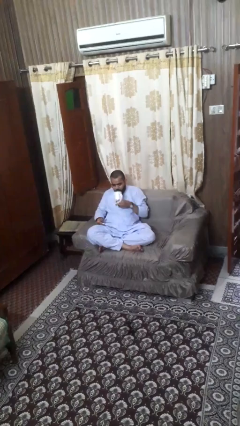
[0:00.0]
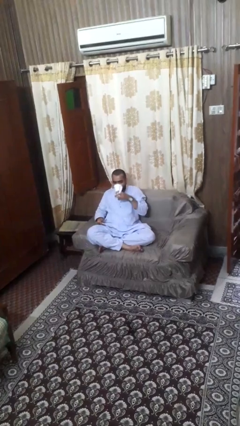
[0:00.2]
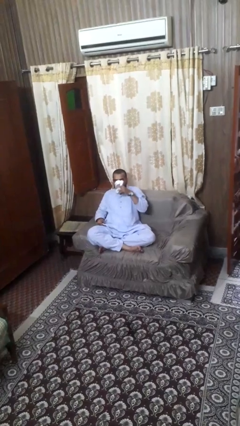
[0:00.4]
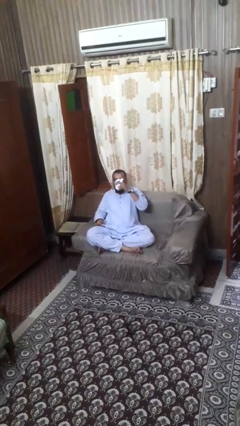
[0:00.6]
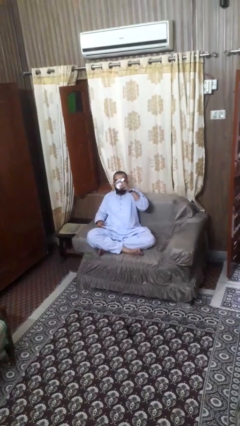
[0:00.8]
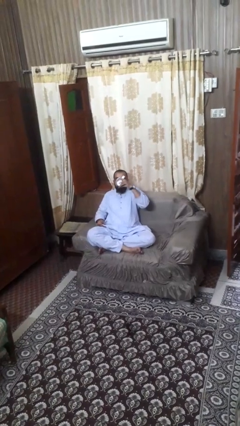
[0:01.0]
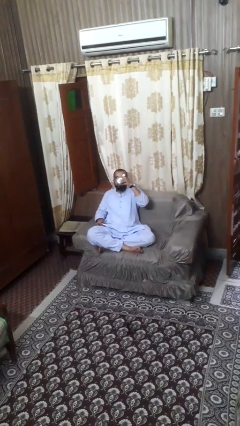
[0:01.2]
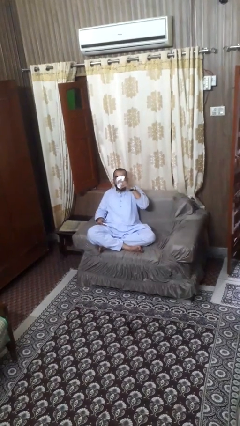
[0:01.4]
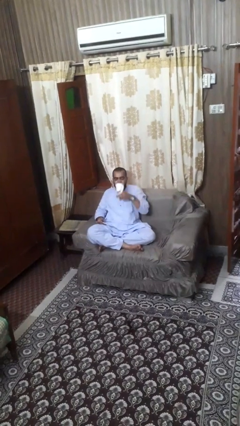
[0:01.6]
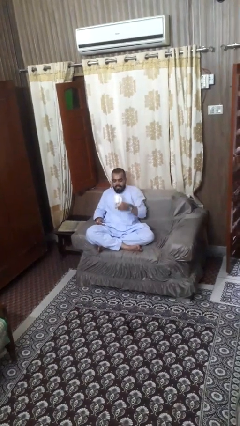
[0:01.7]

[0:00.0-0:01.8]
person drinks from mug

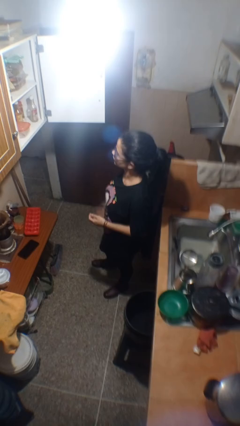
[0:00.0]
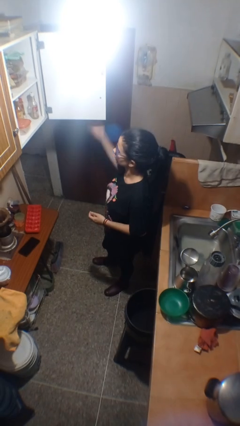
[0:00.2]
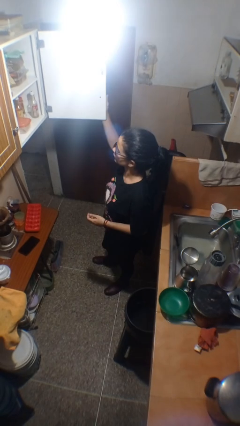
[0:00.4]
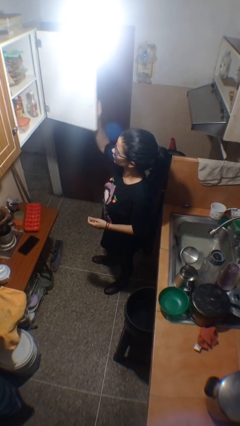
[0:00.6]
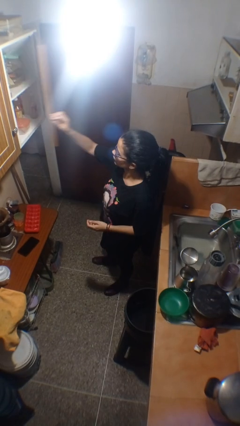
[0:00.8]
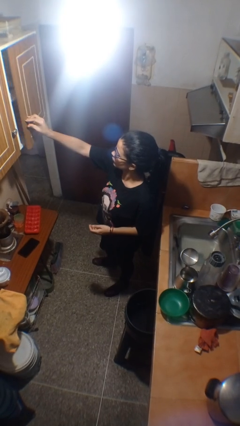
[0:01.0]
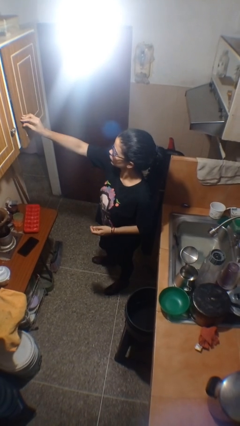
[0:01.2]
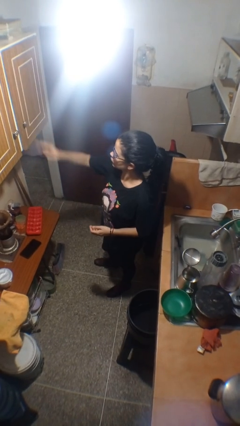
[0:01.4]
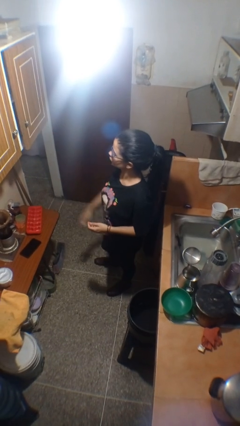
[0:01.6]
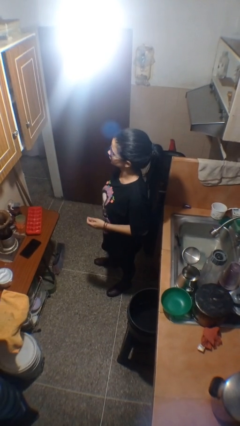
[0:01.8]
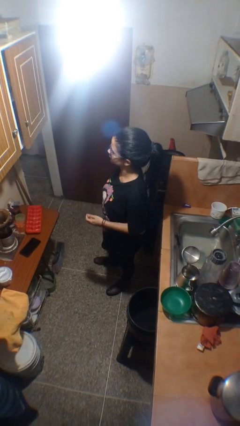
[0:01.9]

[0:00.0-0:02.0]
person closes cabinet

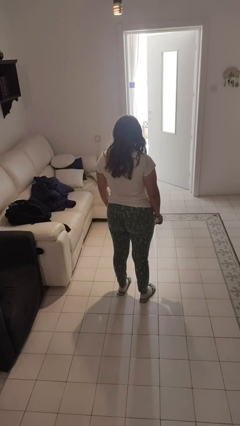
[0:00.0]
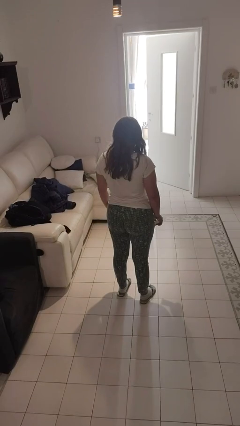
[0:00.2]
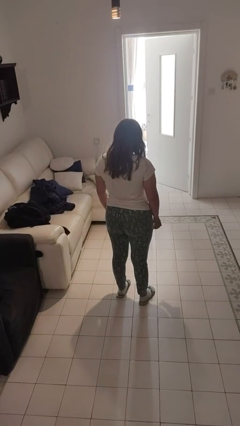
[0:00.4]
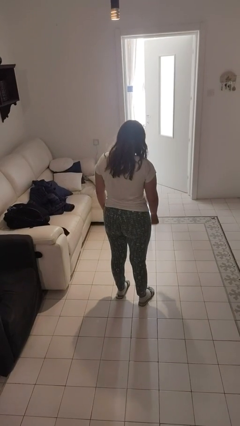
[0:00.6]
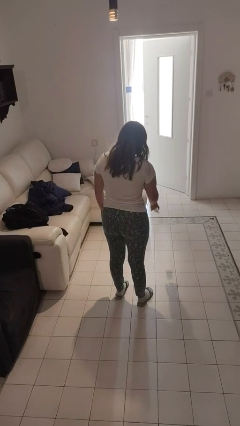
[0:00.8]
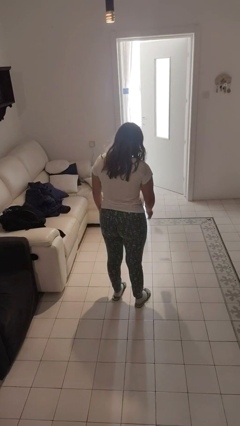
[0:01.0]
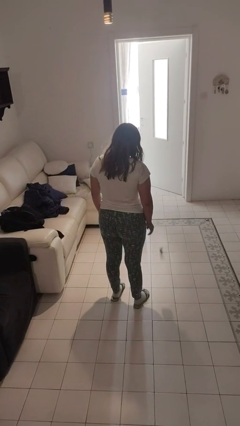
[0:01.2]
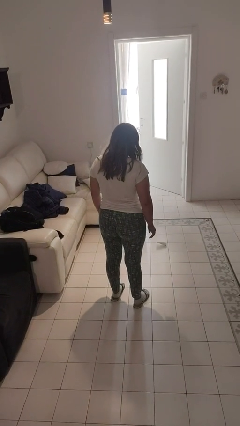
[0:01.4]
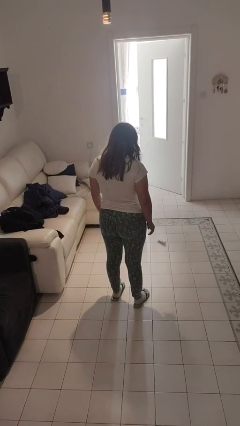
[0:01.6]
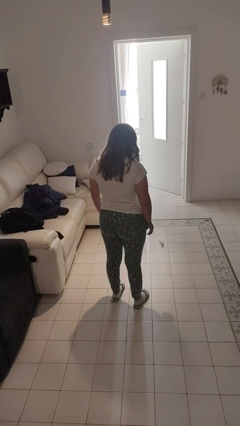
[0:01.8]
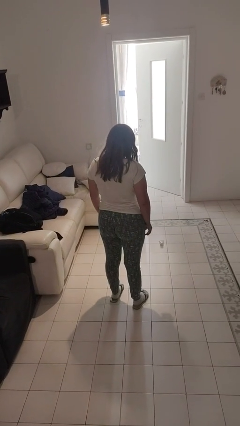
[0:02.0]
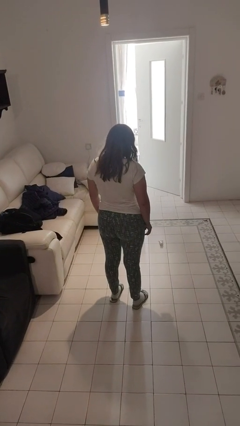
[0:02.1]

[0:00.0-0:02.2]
person throws object to ground

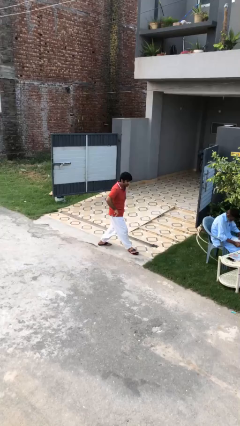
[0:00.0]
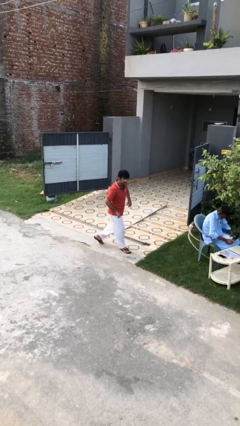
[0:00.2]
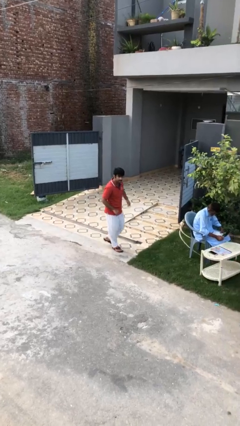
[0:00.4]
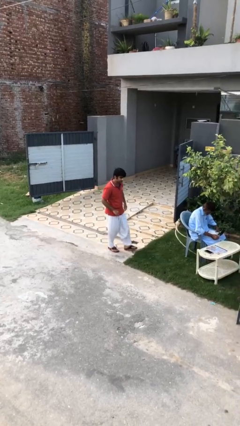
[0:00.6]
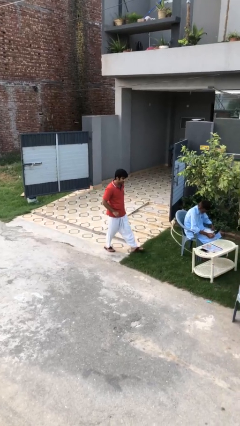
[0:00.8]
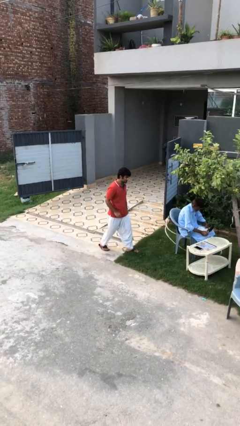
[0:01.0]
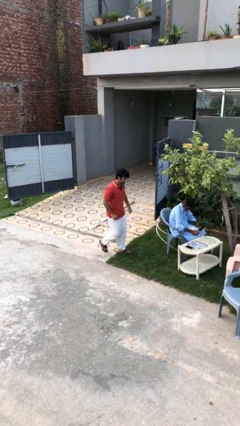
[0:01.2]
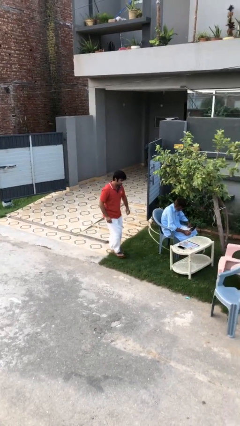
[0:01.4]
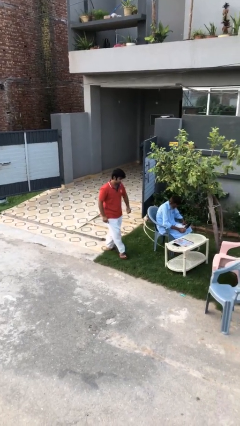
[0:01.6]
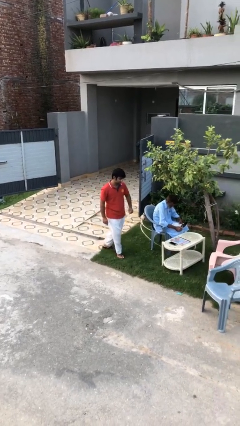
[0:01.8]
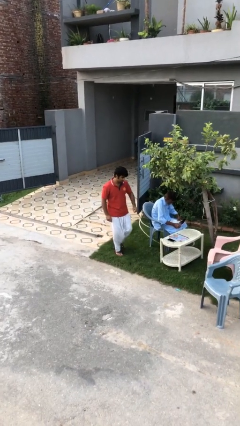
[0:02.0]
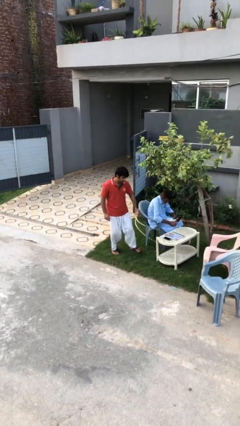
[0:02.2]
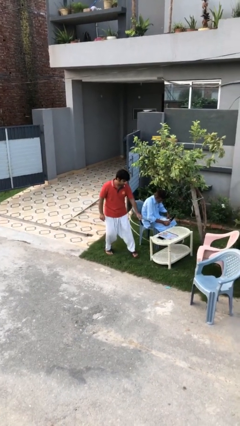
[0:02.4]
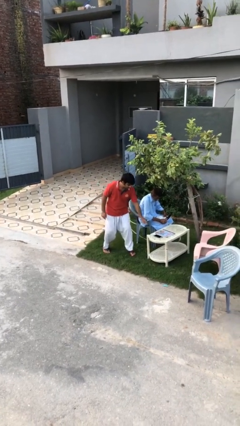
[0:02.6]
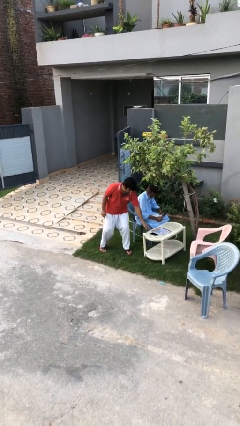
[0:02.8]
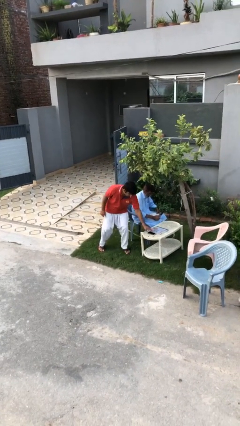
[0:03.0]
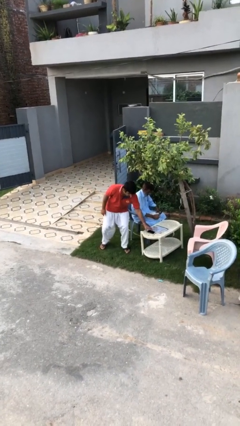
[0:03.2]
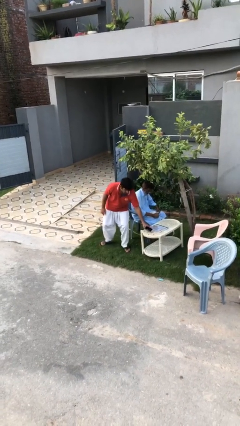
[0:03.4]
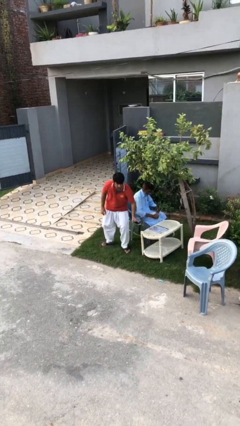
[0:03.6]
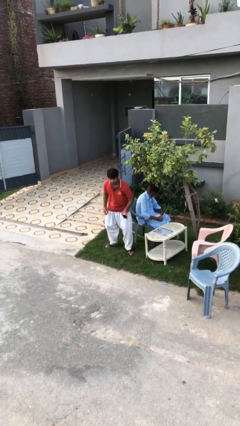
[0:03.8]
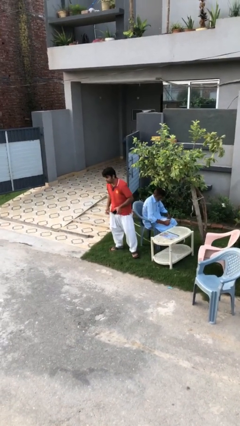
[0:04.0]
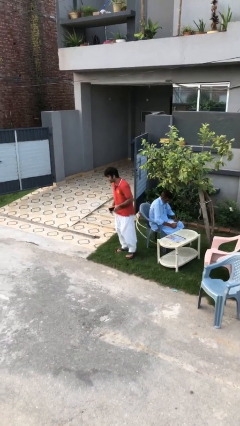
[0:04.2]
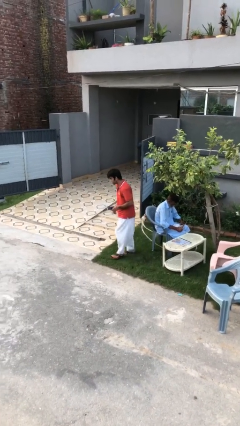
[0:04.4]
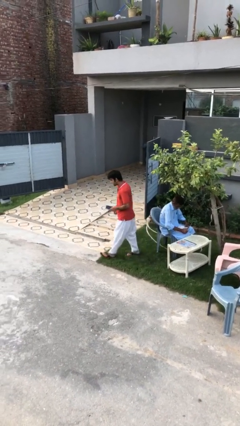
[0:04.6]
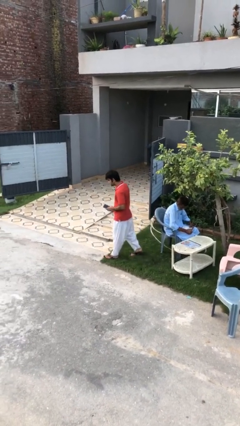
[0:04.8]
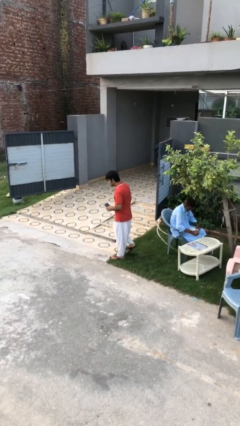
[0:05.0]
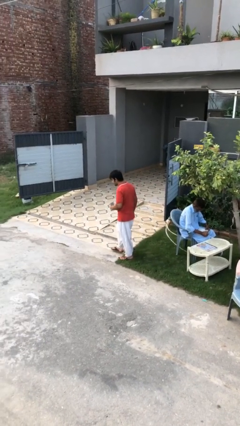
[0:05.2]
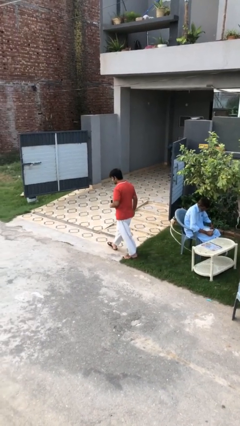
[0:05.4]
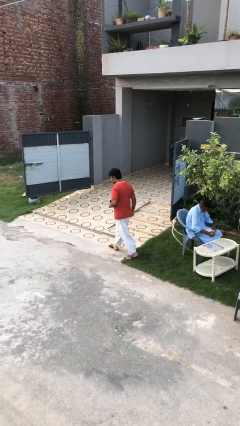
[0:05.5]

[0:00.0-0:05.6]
person steals object from person

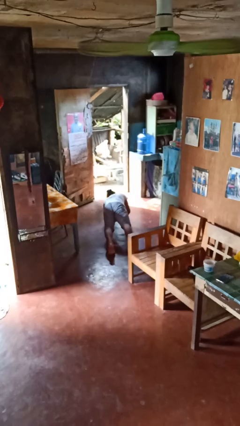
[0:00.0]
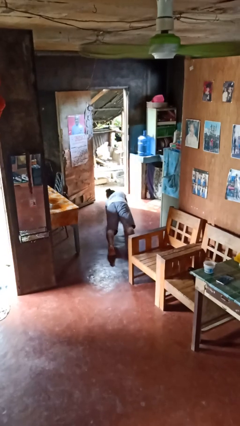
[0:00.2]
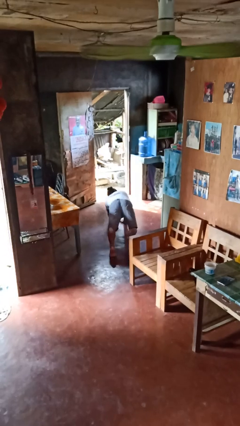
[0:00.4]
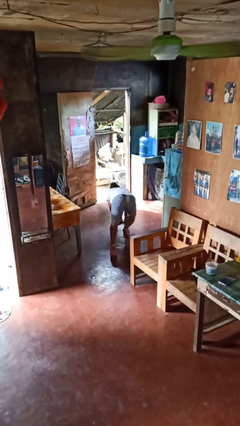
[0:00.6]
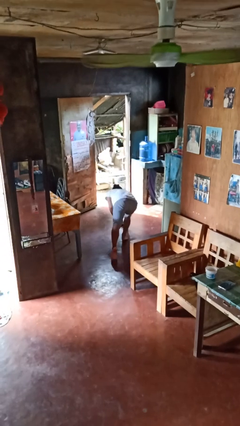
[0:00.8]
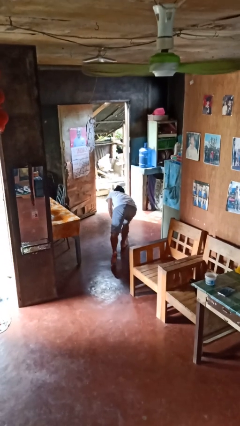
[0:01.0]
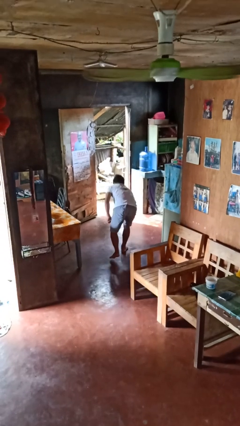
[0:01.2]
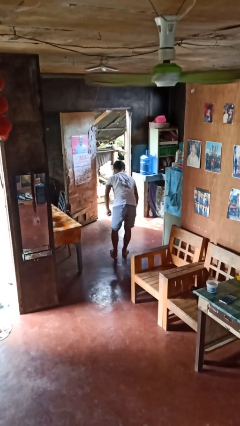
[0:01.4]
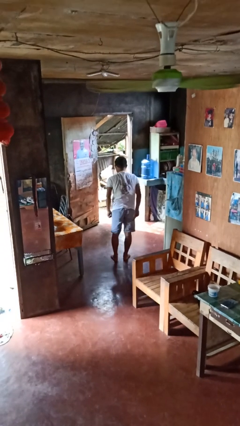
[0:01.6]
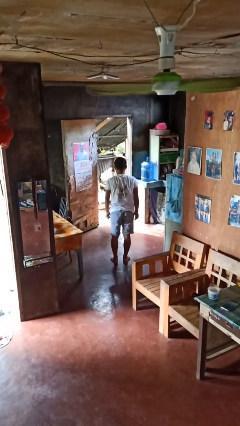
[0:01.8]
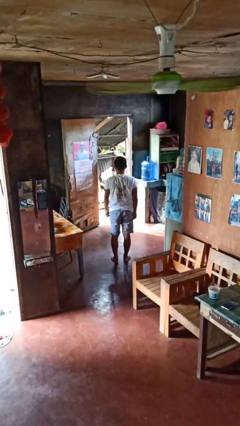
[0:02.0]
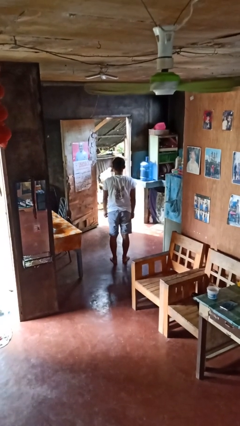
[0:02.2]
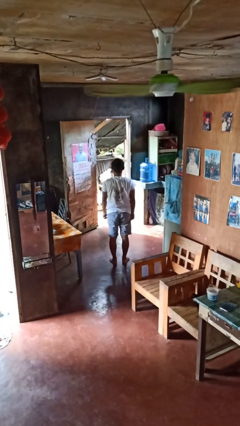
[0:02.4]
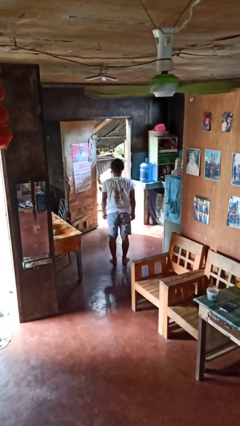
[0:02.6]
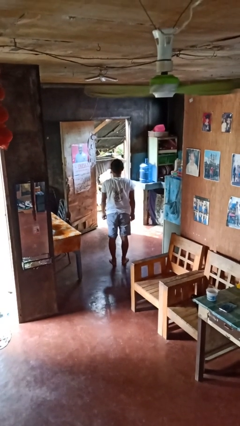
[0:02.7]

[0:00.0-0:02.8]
person stands up from floor

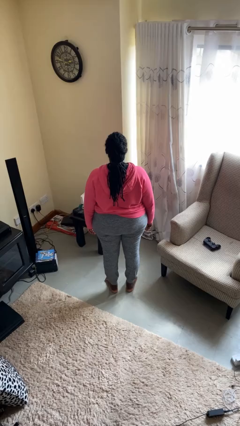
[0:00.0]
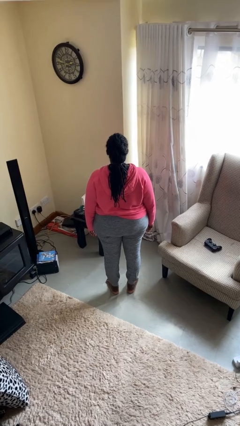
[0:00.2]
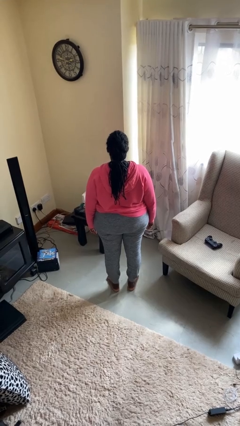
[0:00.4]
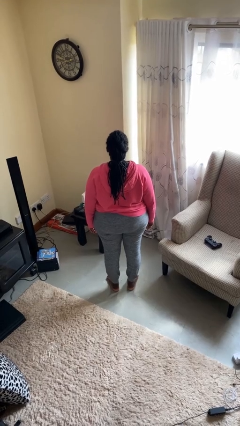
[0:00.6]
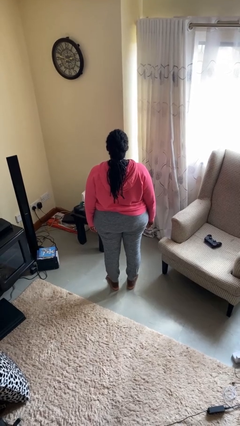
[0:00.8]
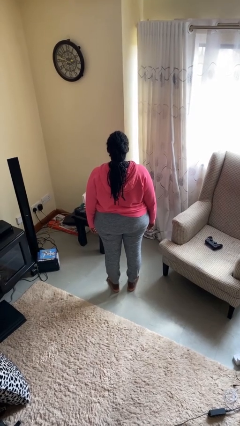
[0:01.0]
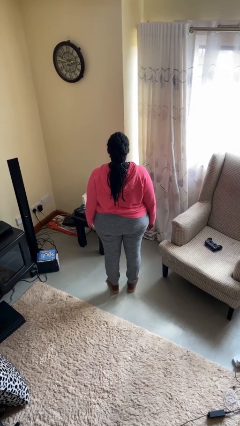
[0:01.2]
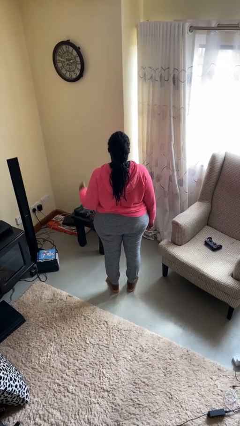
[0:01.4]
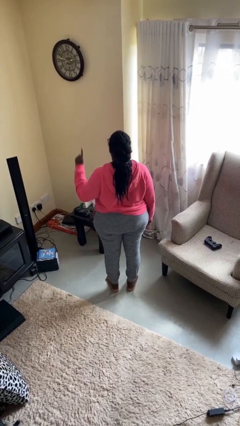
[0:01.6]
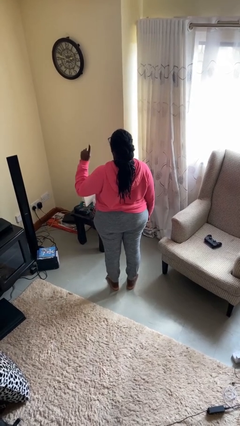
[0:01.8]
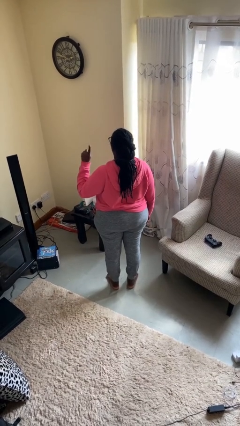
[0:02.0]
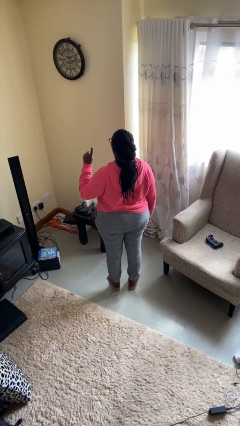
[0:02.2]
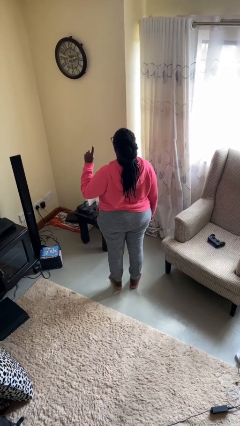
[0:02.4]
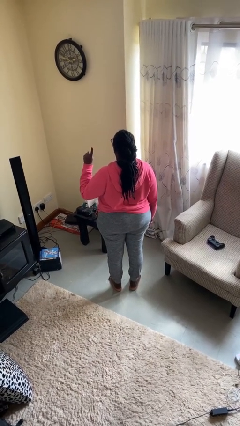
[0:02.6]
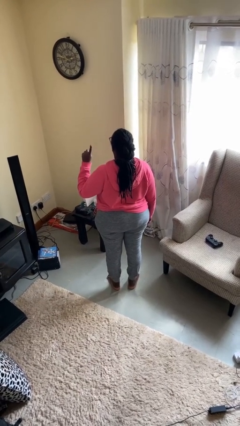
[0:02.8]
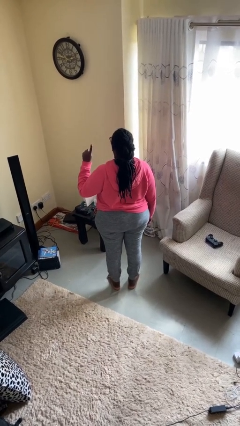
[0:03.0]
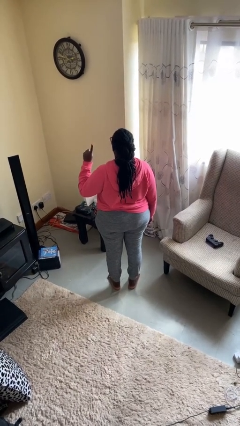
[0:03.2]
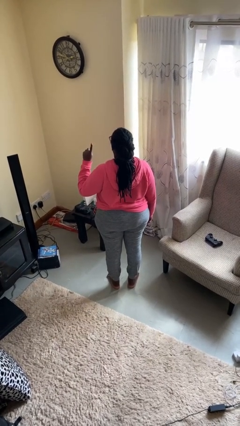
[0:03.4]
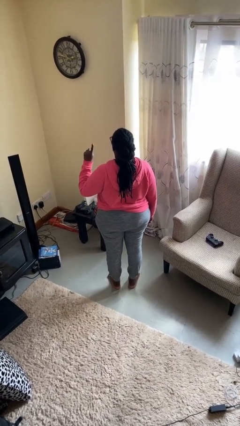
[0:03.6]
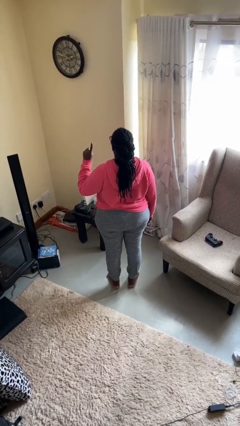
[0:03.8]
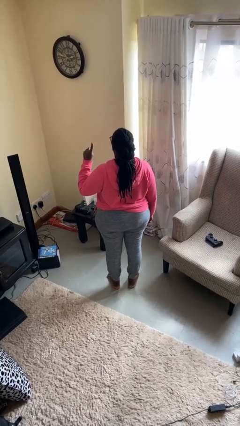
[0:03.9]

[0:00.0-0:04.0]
person gestures number one
